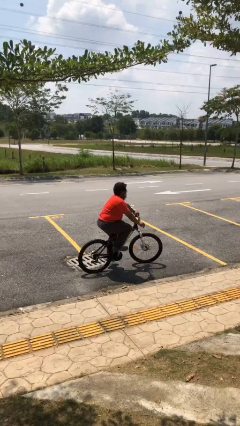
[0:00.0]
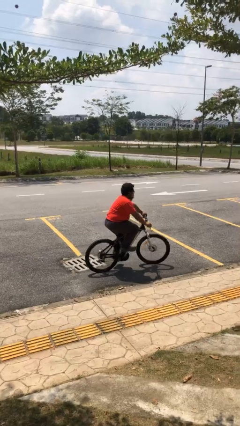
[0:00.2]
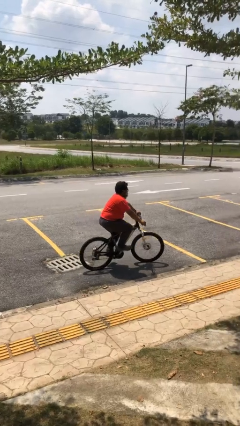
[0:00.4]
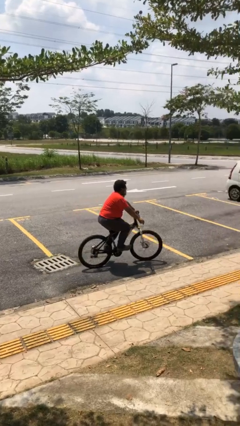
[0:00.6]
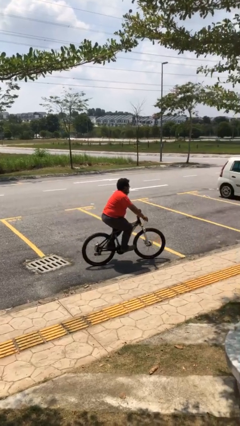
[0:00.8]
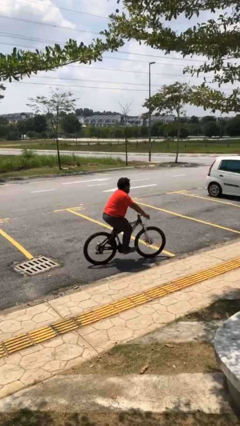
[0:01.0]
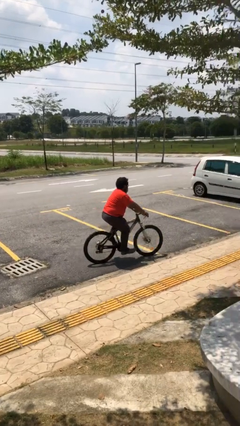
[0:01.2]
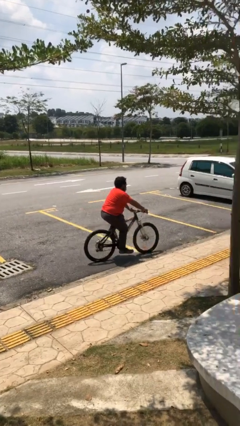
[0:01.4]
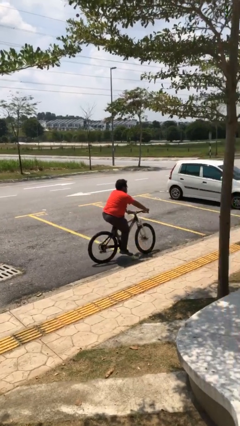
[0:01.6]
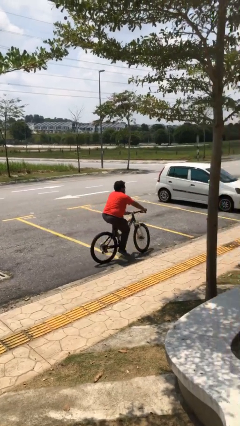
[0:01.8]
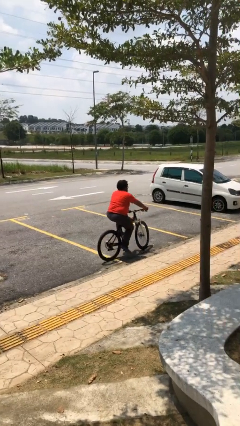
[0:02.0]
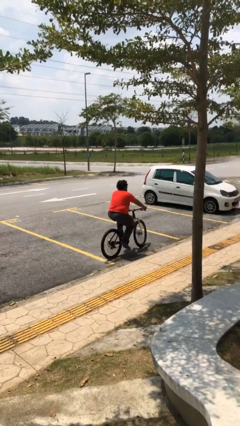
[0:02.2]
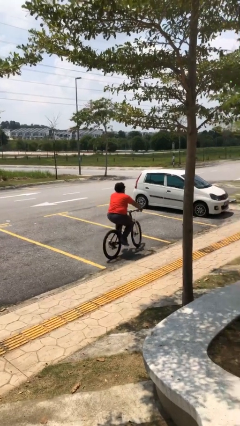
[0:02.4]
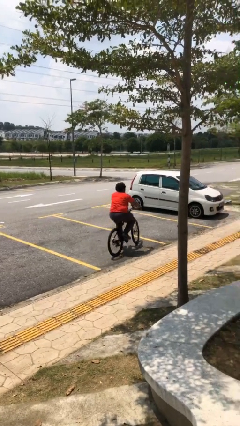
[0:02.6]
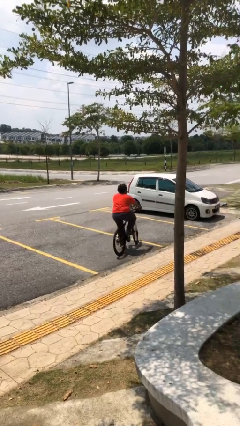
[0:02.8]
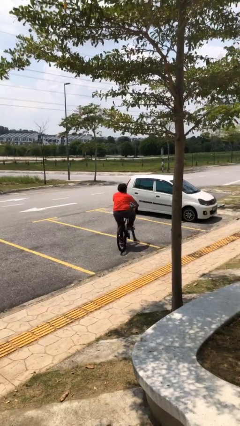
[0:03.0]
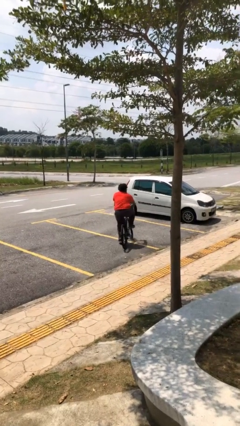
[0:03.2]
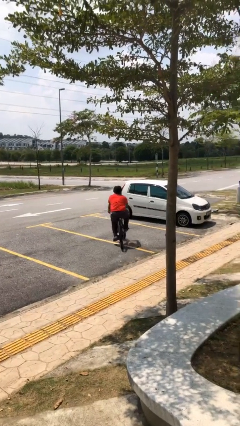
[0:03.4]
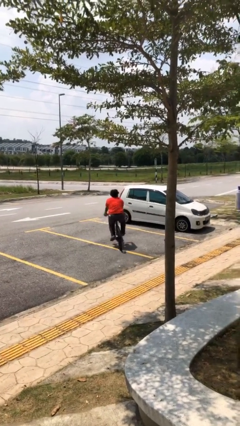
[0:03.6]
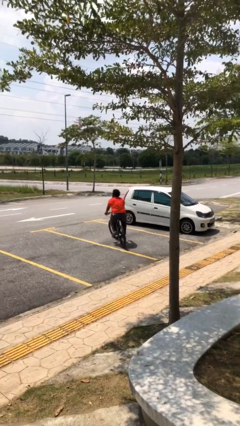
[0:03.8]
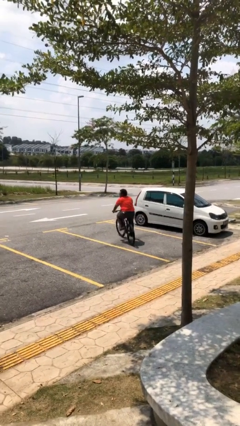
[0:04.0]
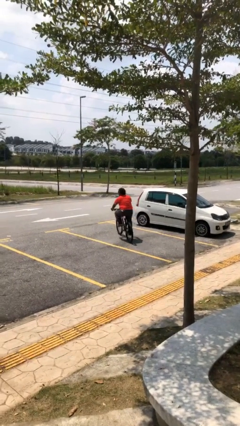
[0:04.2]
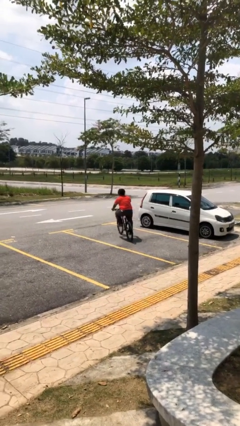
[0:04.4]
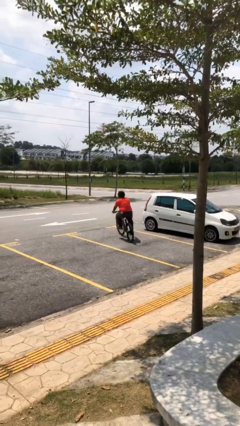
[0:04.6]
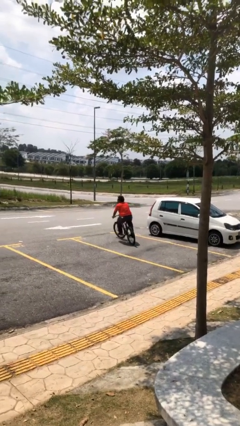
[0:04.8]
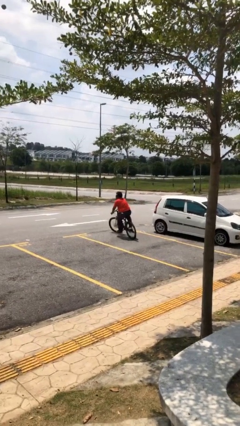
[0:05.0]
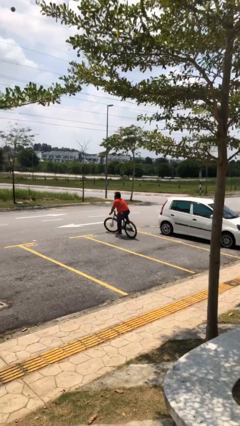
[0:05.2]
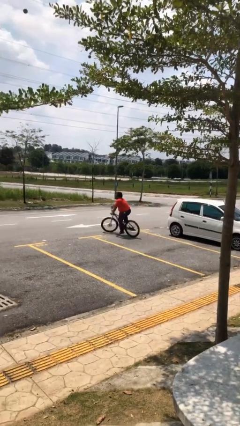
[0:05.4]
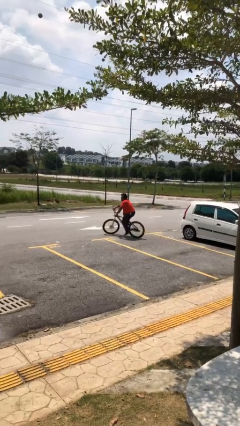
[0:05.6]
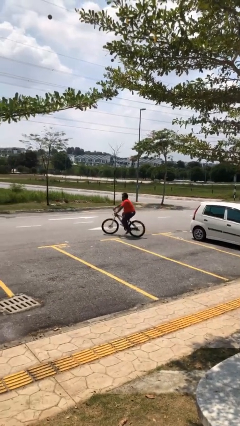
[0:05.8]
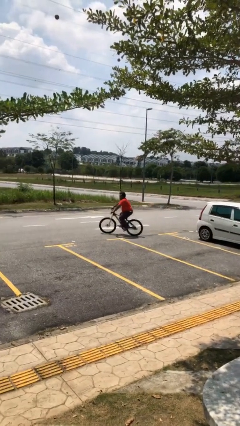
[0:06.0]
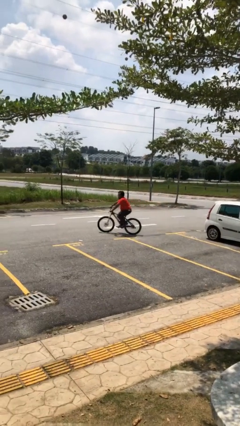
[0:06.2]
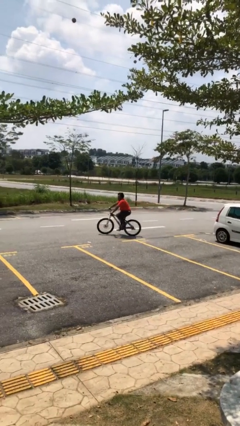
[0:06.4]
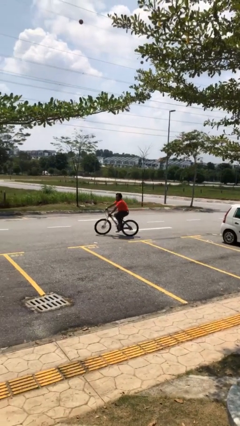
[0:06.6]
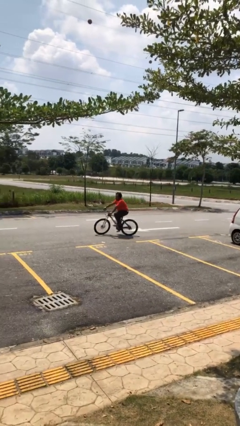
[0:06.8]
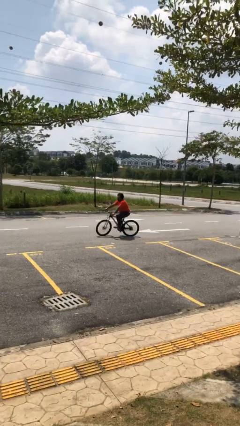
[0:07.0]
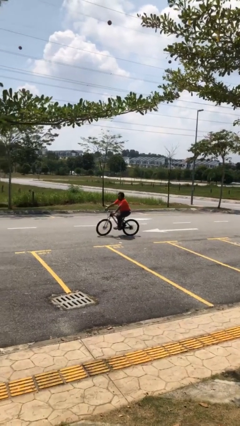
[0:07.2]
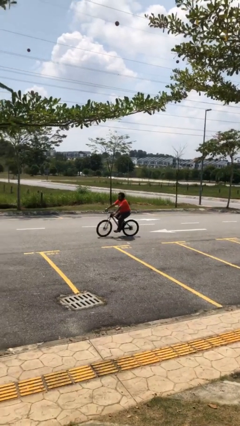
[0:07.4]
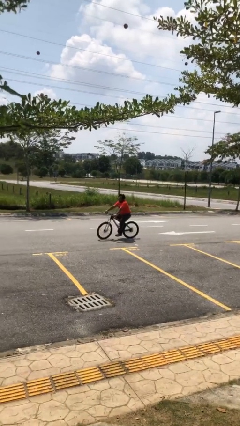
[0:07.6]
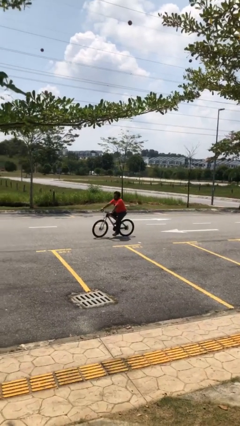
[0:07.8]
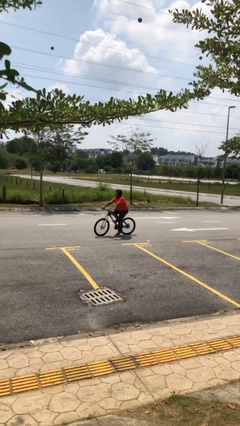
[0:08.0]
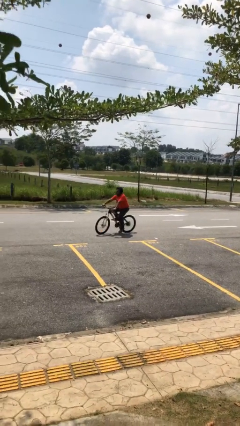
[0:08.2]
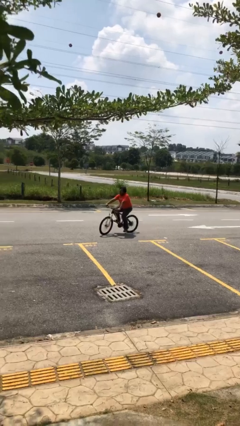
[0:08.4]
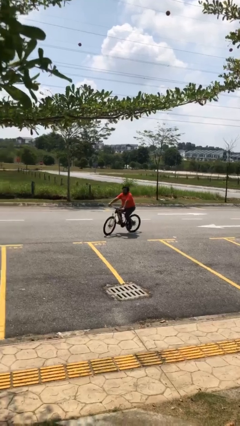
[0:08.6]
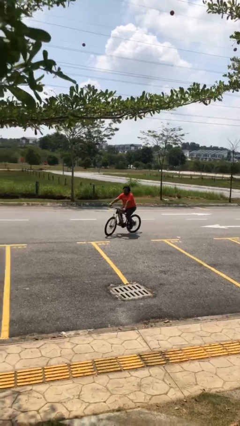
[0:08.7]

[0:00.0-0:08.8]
person rides bicycle

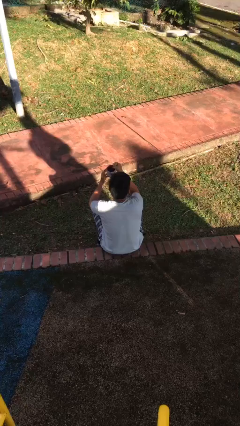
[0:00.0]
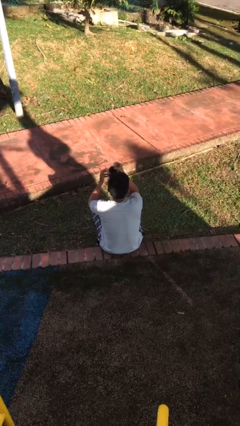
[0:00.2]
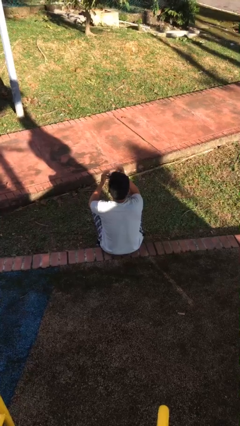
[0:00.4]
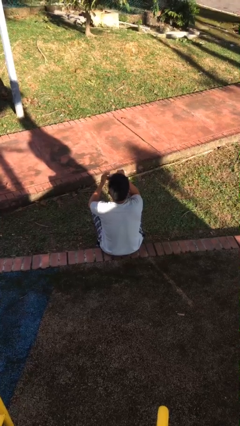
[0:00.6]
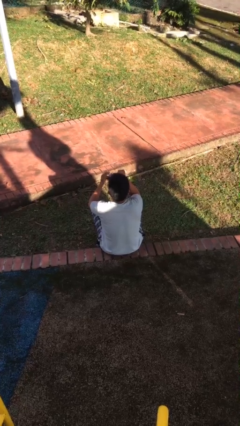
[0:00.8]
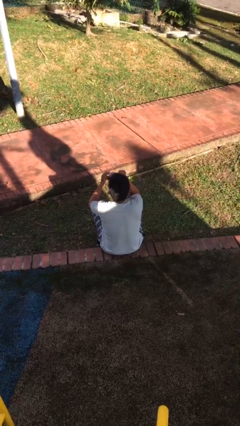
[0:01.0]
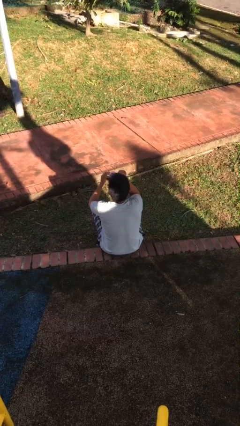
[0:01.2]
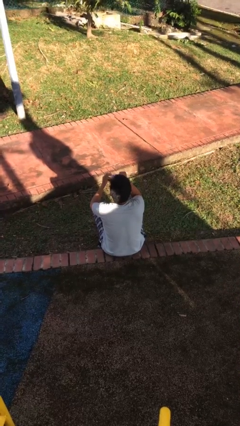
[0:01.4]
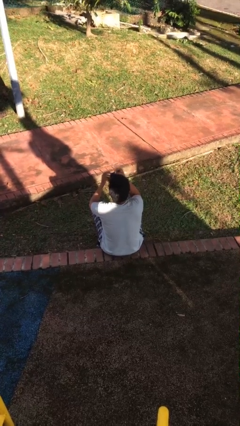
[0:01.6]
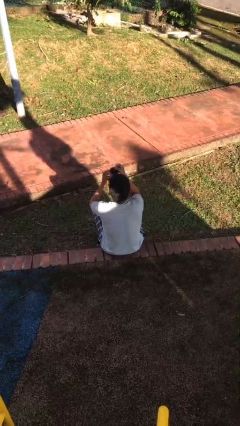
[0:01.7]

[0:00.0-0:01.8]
person drinks from mug

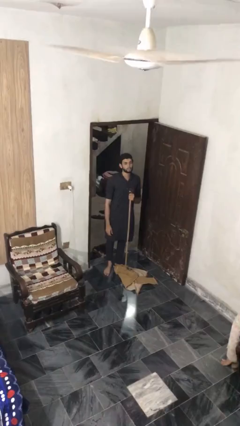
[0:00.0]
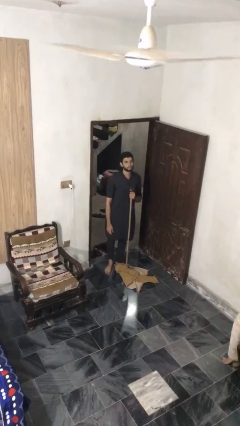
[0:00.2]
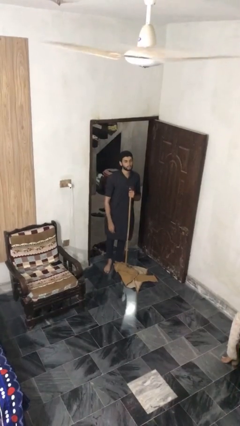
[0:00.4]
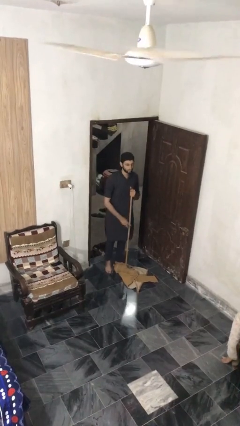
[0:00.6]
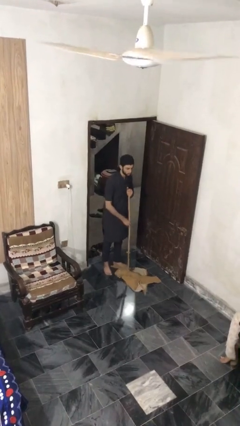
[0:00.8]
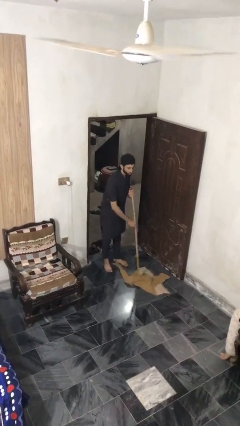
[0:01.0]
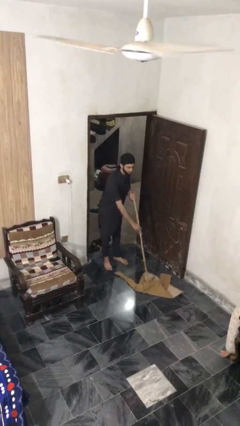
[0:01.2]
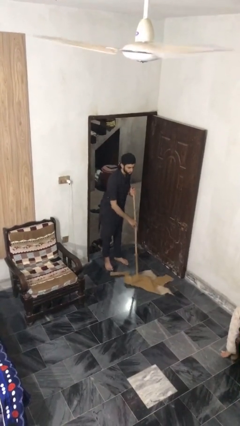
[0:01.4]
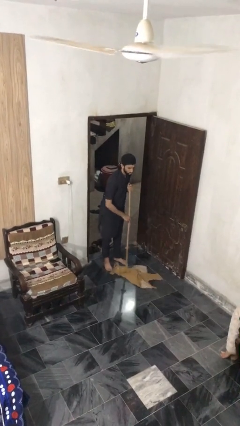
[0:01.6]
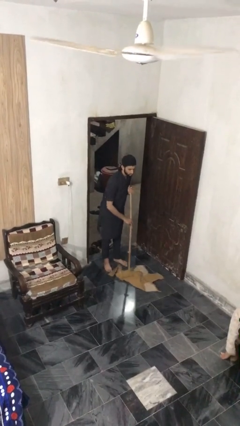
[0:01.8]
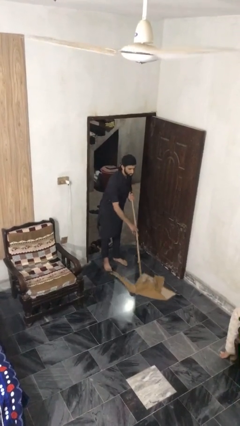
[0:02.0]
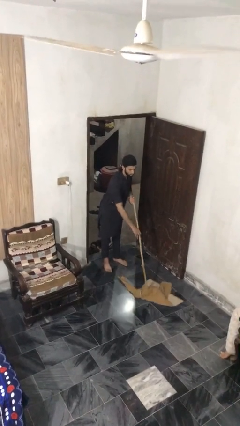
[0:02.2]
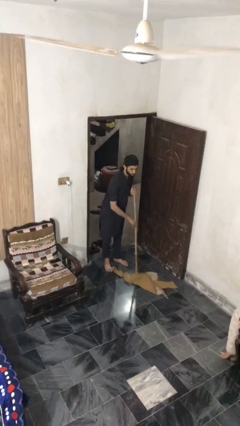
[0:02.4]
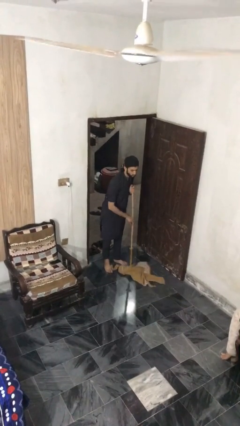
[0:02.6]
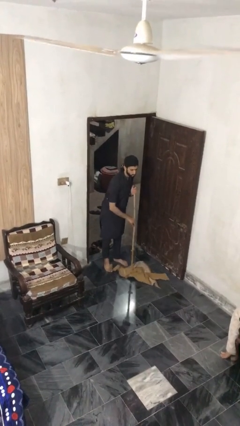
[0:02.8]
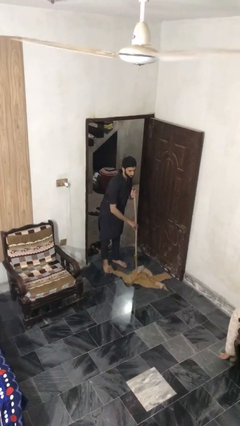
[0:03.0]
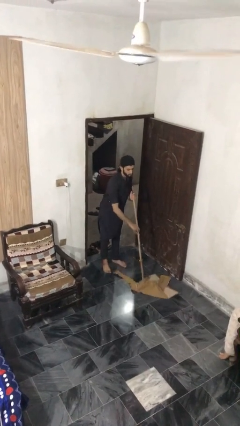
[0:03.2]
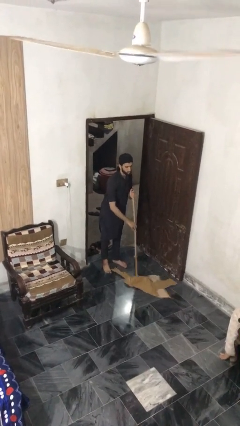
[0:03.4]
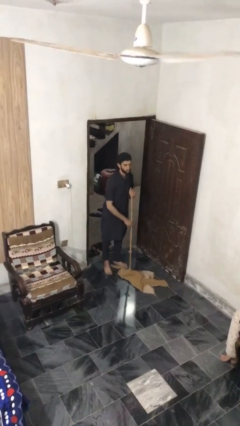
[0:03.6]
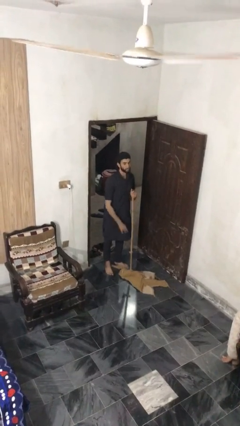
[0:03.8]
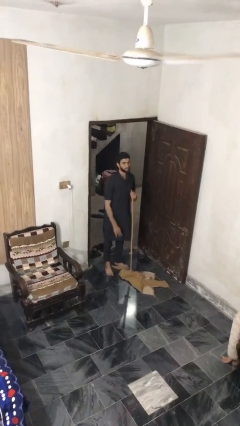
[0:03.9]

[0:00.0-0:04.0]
person mops

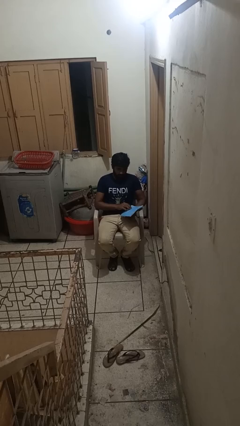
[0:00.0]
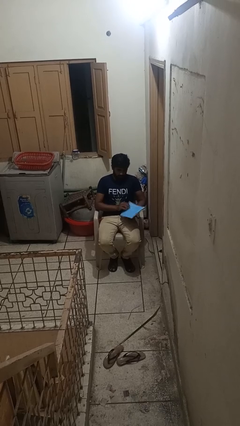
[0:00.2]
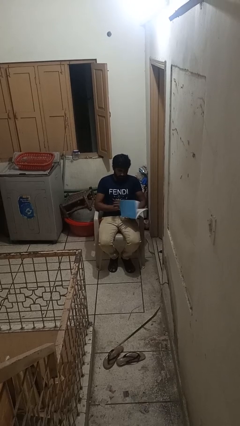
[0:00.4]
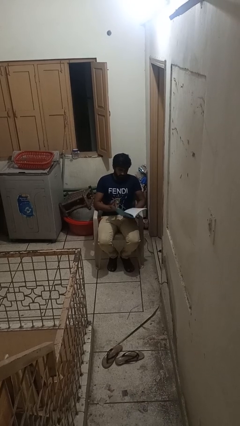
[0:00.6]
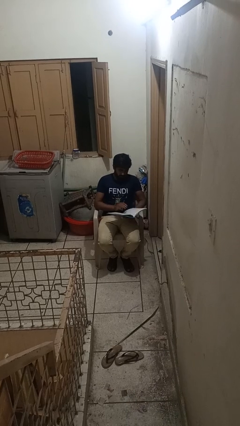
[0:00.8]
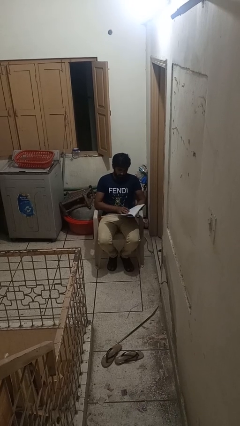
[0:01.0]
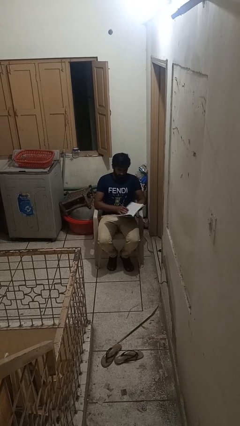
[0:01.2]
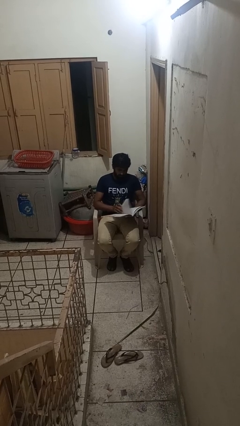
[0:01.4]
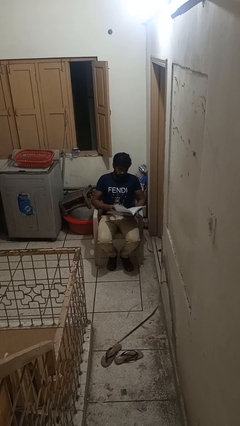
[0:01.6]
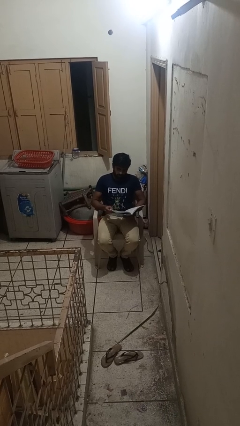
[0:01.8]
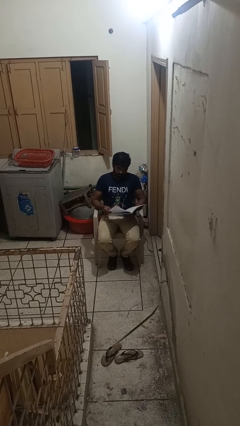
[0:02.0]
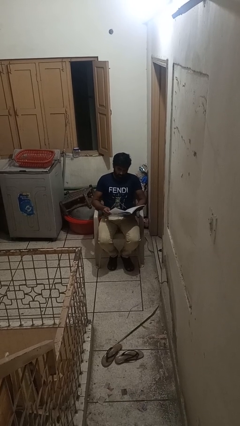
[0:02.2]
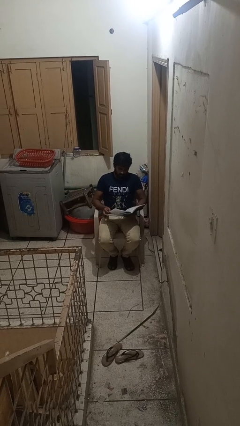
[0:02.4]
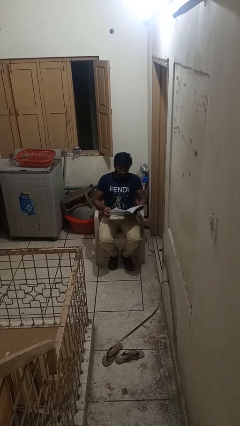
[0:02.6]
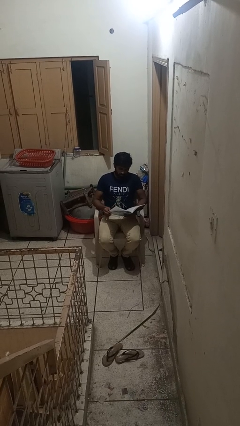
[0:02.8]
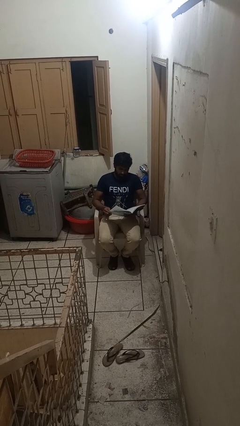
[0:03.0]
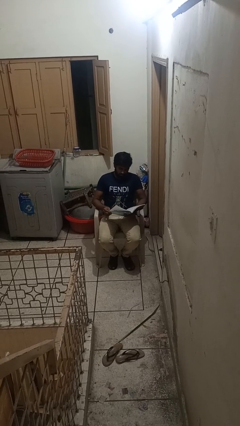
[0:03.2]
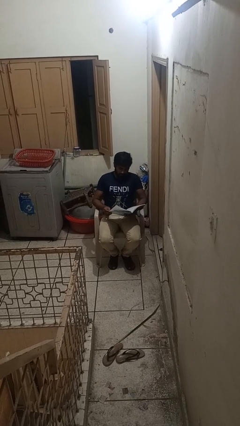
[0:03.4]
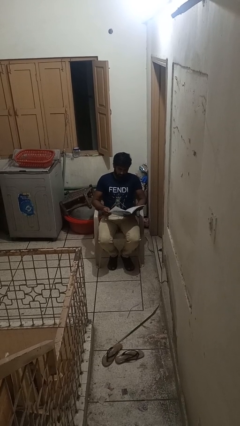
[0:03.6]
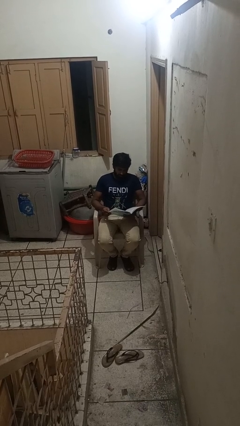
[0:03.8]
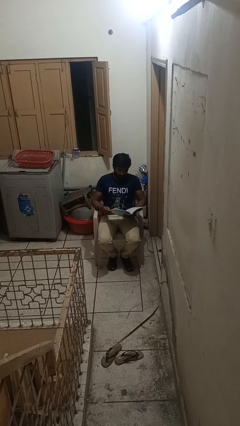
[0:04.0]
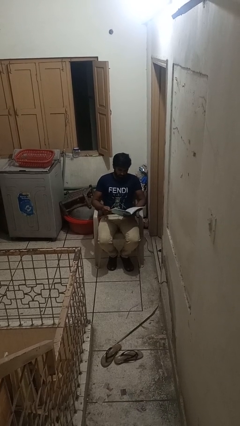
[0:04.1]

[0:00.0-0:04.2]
person reads book
